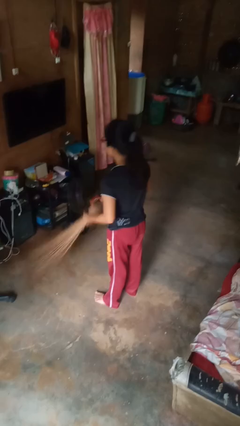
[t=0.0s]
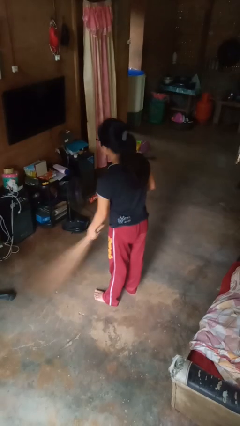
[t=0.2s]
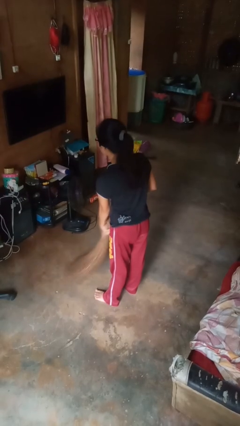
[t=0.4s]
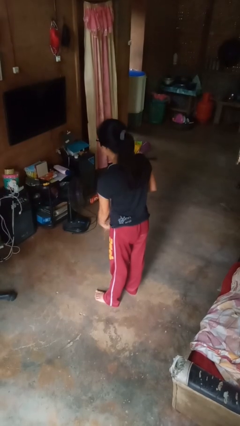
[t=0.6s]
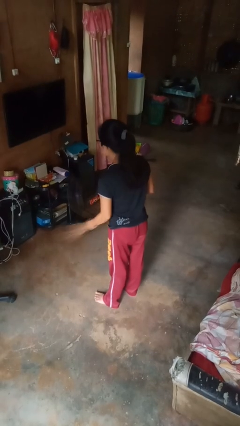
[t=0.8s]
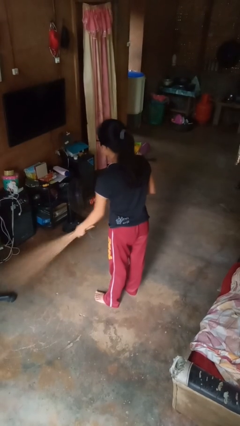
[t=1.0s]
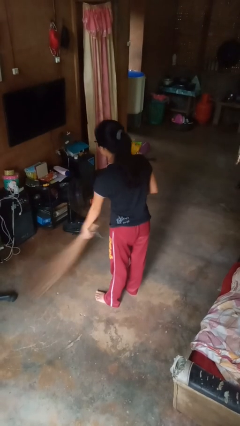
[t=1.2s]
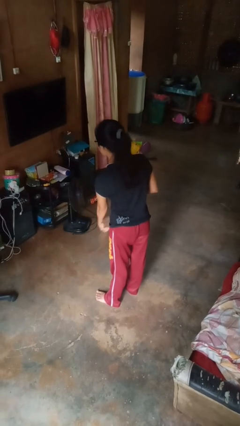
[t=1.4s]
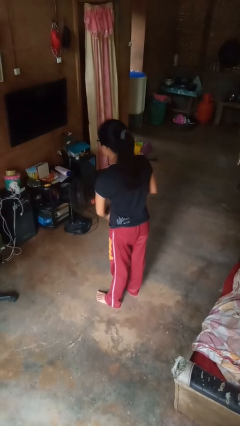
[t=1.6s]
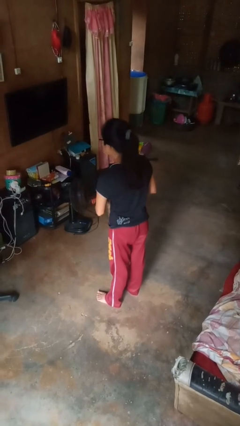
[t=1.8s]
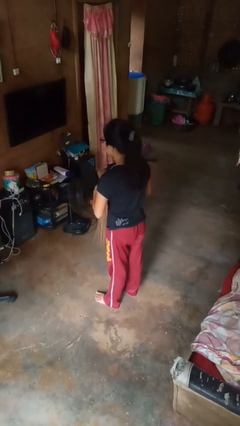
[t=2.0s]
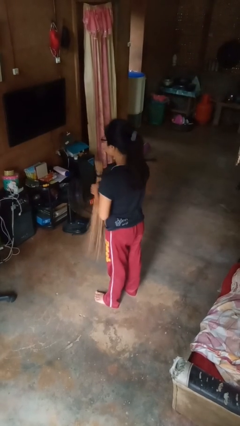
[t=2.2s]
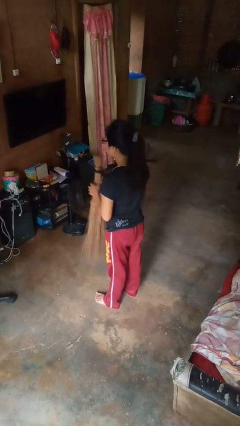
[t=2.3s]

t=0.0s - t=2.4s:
person sweeps floor

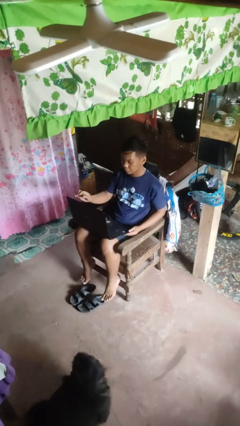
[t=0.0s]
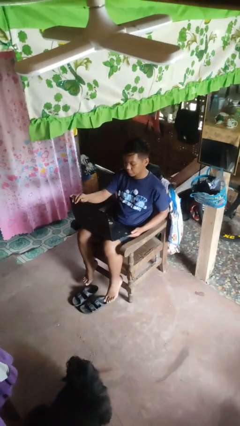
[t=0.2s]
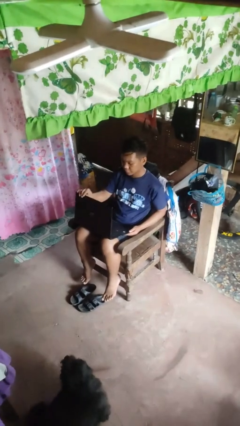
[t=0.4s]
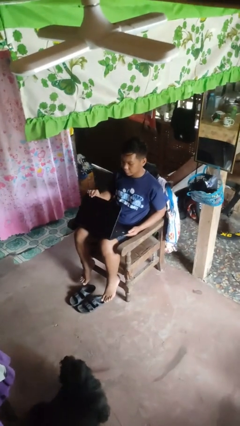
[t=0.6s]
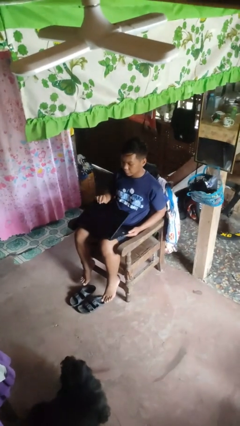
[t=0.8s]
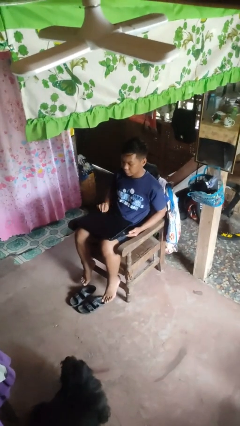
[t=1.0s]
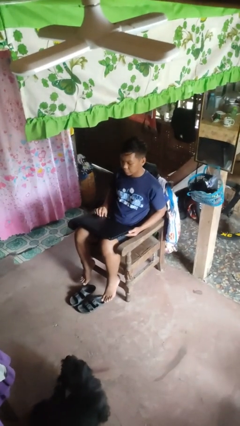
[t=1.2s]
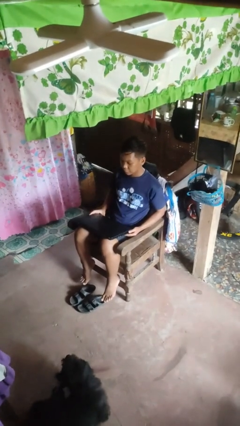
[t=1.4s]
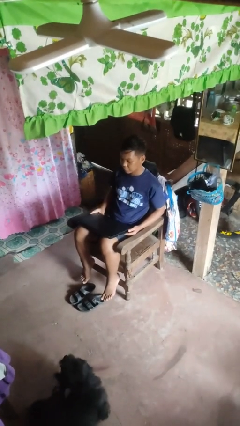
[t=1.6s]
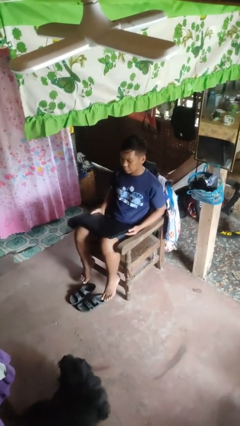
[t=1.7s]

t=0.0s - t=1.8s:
person closes laptop

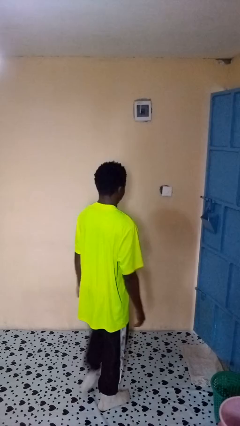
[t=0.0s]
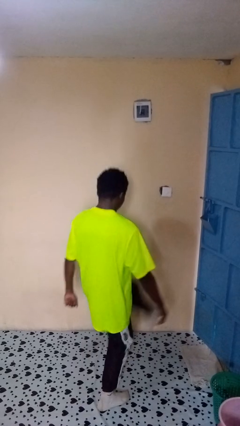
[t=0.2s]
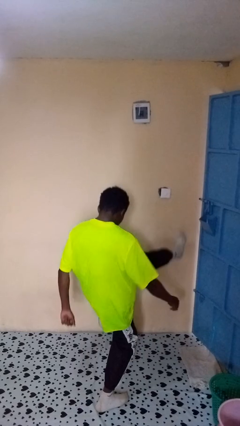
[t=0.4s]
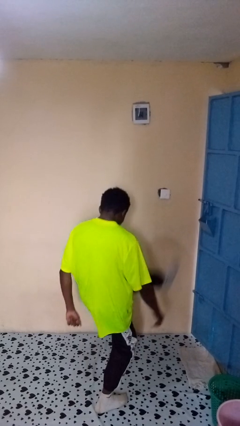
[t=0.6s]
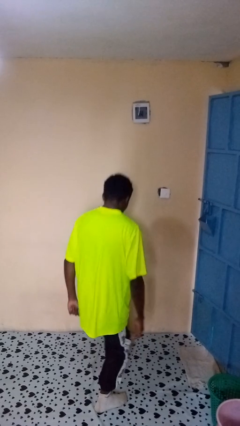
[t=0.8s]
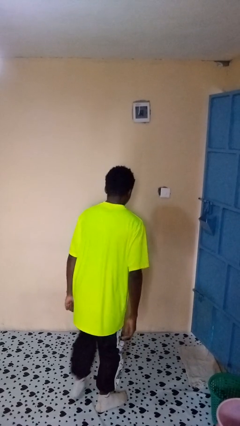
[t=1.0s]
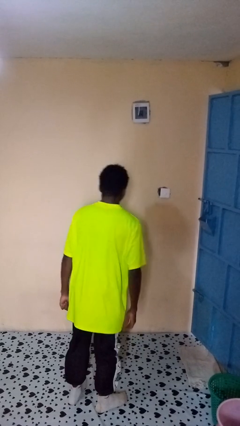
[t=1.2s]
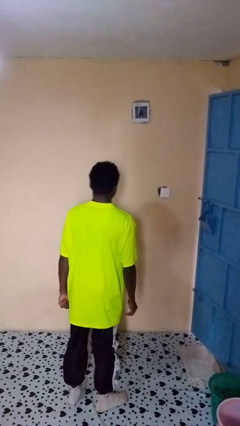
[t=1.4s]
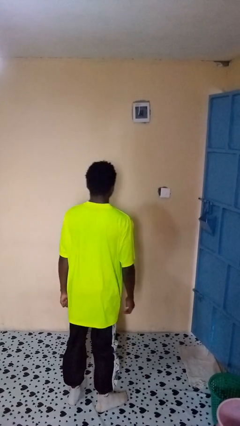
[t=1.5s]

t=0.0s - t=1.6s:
person karate kicks

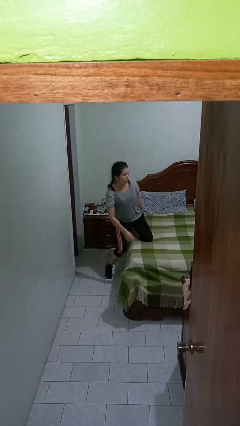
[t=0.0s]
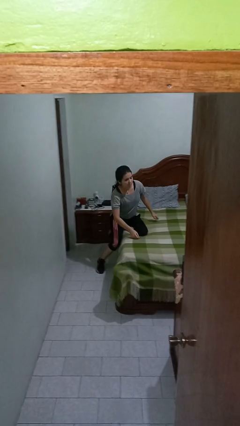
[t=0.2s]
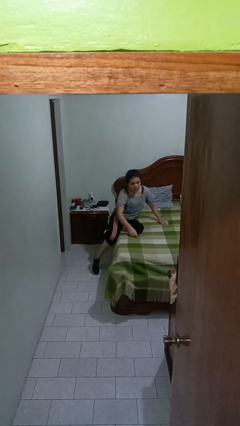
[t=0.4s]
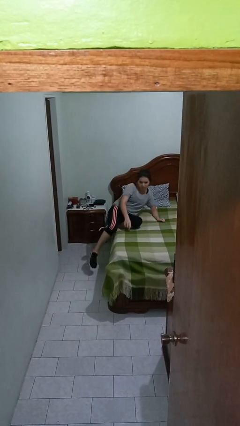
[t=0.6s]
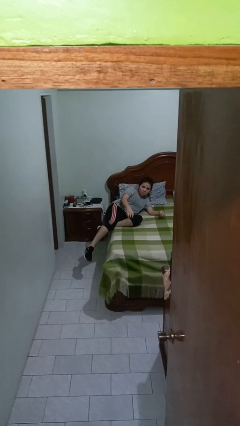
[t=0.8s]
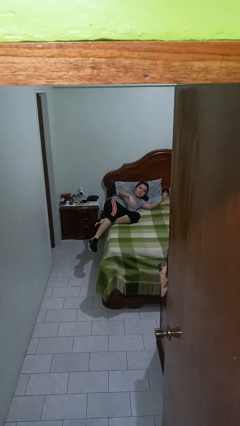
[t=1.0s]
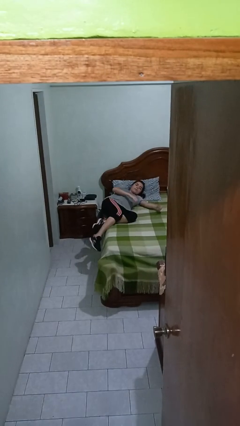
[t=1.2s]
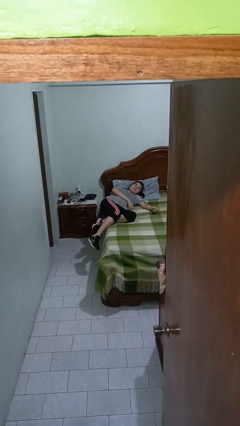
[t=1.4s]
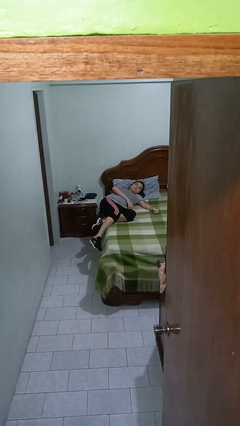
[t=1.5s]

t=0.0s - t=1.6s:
person lies down on bed

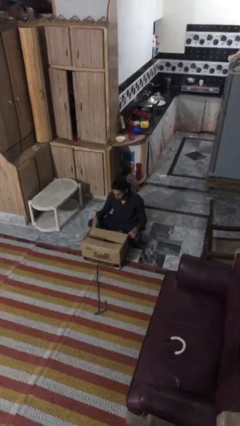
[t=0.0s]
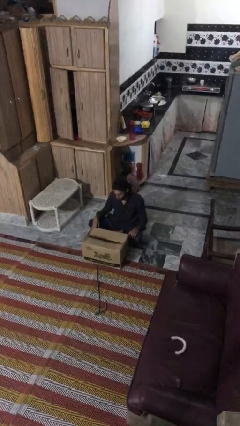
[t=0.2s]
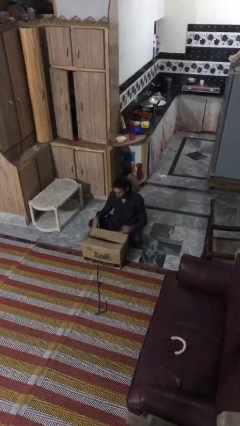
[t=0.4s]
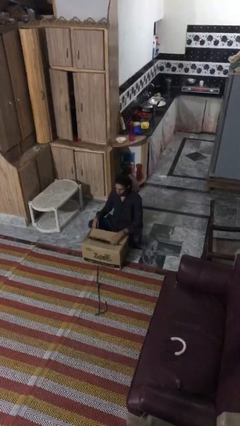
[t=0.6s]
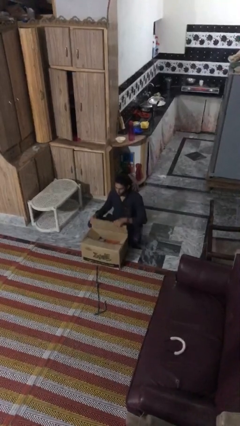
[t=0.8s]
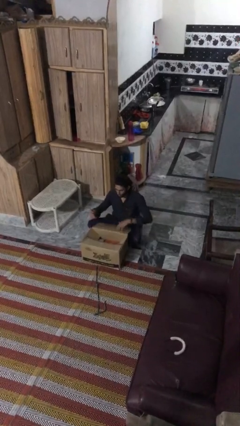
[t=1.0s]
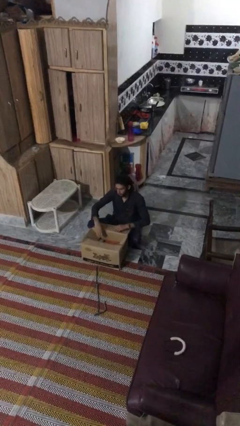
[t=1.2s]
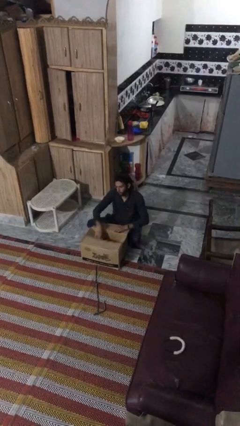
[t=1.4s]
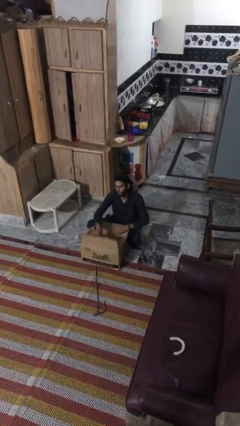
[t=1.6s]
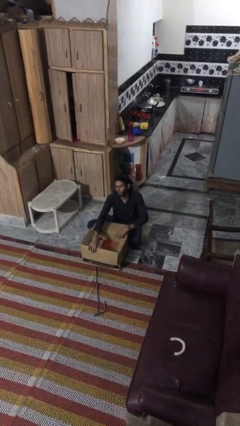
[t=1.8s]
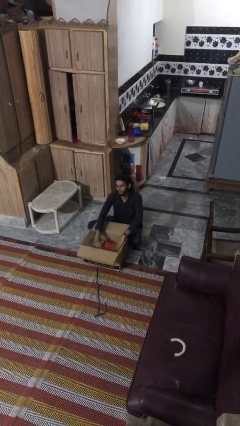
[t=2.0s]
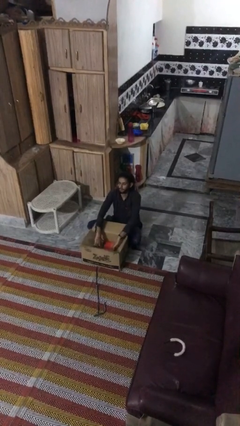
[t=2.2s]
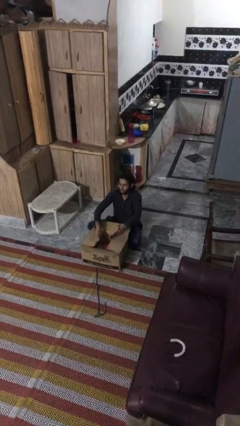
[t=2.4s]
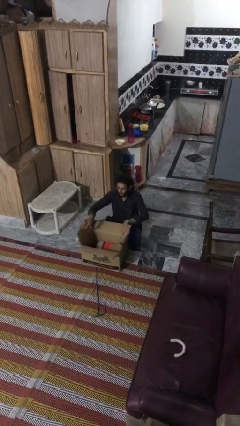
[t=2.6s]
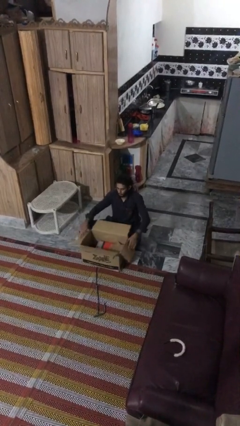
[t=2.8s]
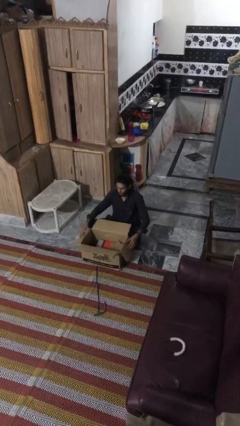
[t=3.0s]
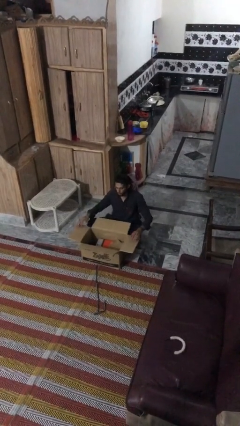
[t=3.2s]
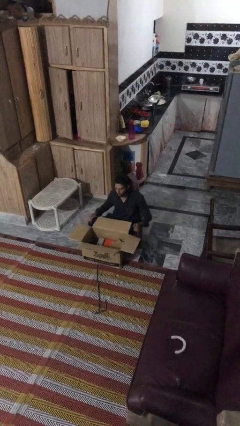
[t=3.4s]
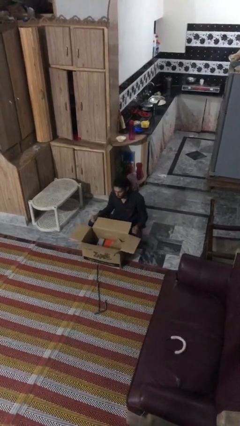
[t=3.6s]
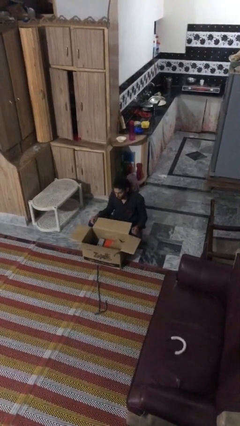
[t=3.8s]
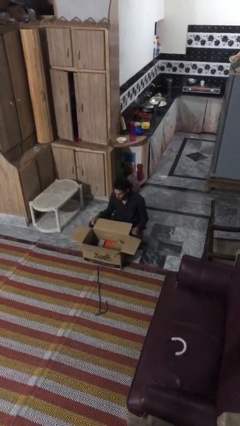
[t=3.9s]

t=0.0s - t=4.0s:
person opens box

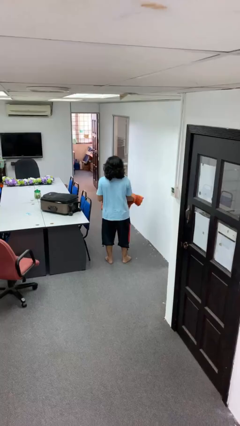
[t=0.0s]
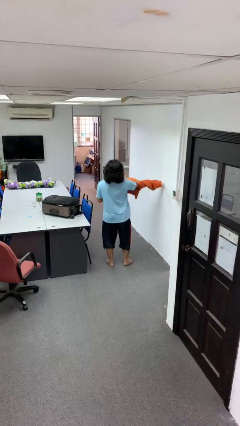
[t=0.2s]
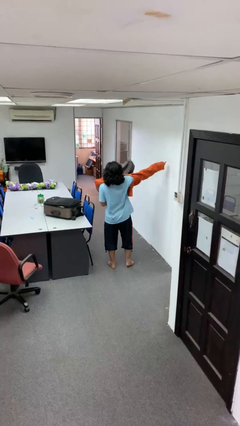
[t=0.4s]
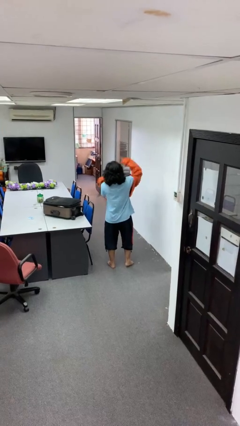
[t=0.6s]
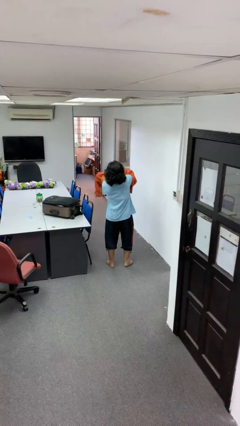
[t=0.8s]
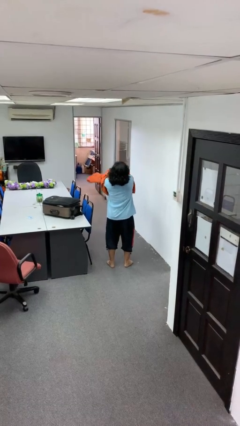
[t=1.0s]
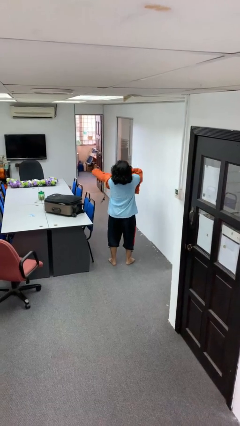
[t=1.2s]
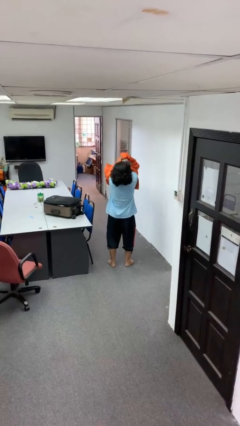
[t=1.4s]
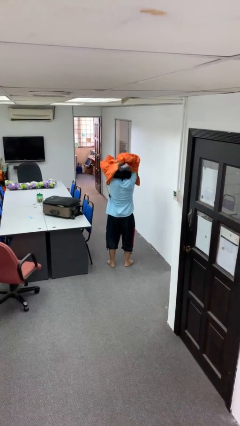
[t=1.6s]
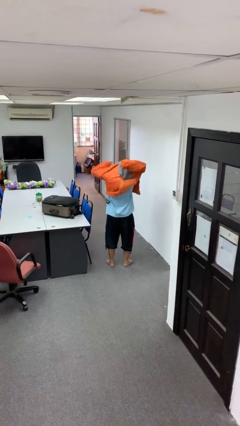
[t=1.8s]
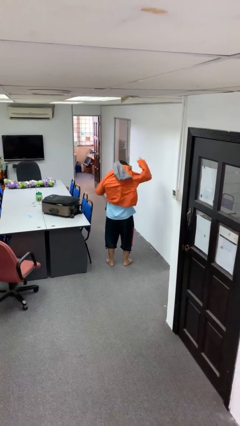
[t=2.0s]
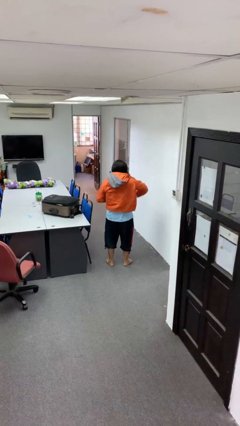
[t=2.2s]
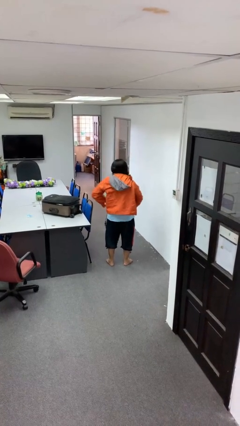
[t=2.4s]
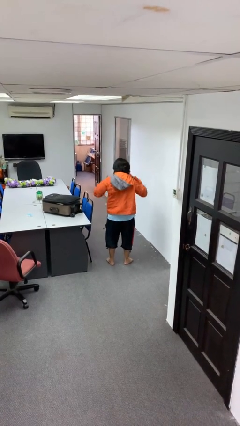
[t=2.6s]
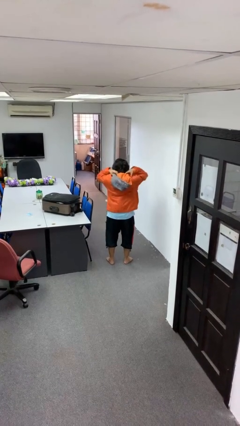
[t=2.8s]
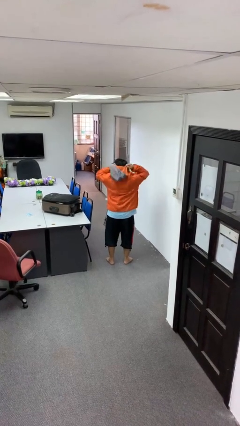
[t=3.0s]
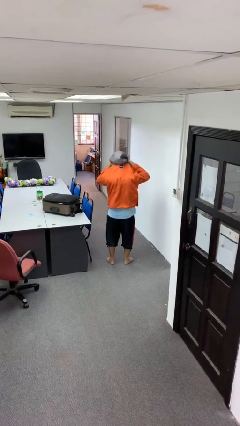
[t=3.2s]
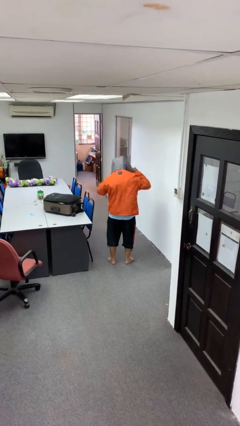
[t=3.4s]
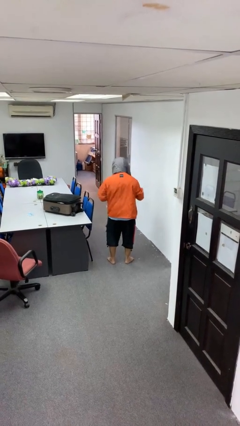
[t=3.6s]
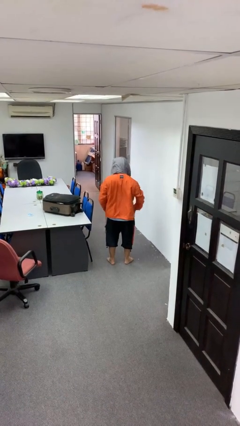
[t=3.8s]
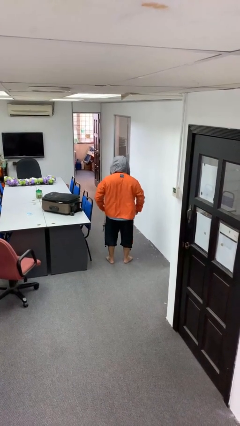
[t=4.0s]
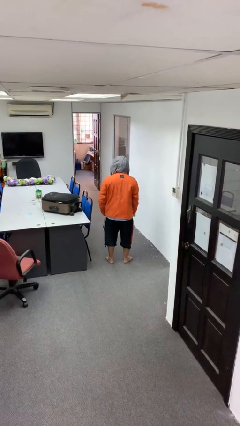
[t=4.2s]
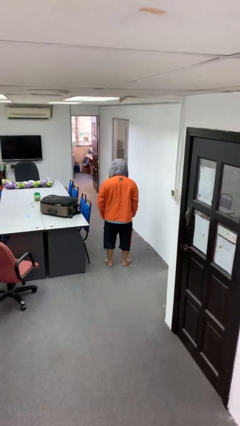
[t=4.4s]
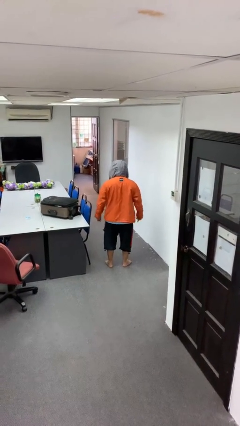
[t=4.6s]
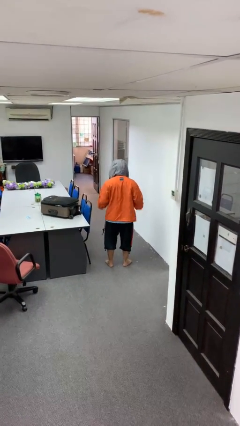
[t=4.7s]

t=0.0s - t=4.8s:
person puts on hoodie

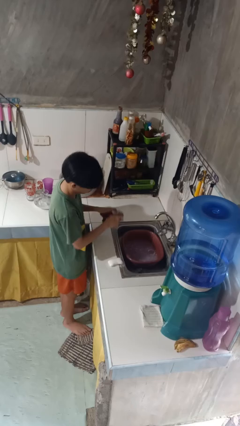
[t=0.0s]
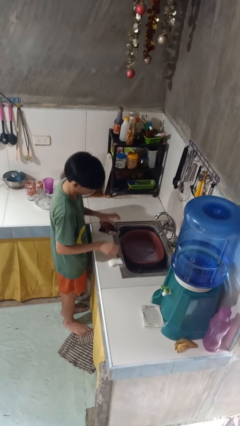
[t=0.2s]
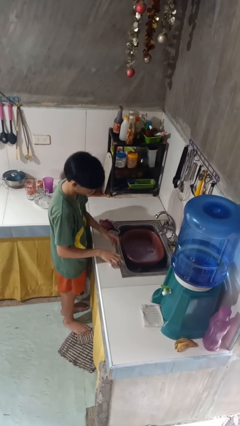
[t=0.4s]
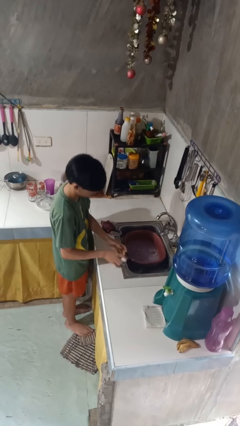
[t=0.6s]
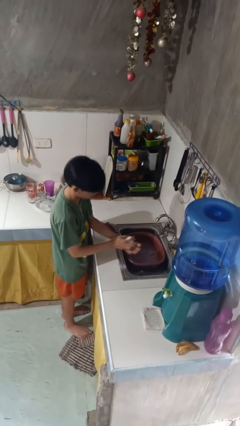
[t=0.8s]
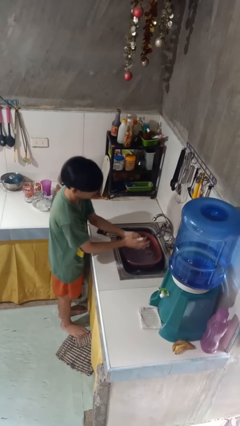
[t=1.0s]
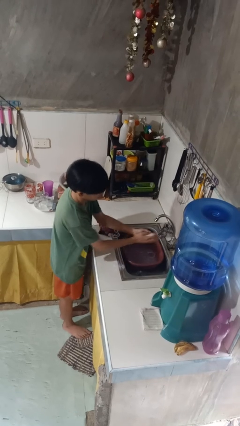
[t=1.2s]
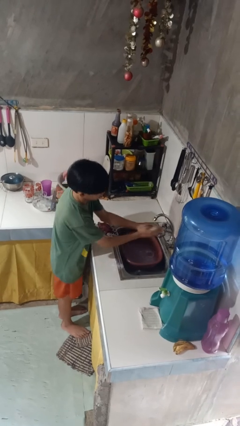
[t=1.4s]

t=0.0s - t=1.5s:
person washes hands
